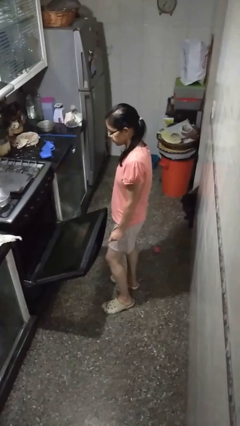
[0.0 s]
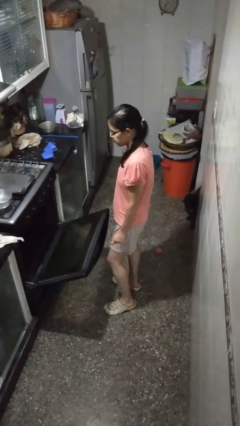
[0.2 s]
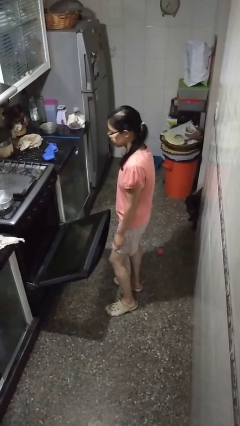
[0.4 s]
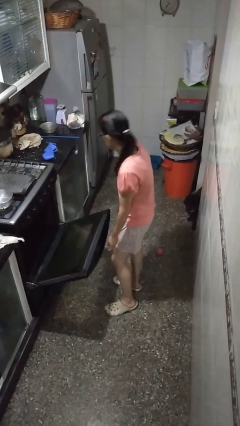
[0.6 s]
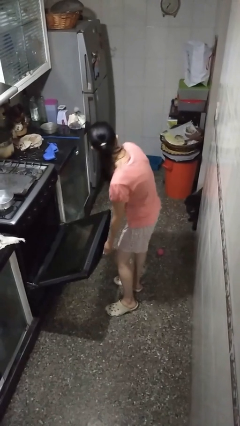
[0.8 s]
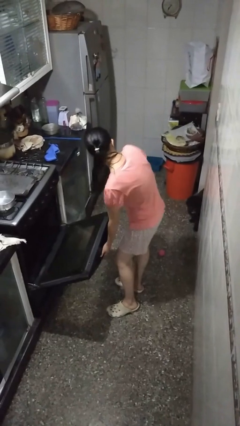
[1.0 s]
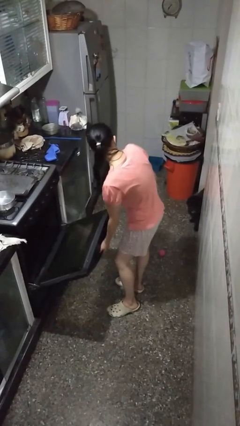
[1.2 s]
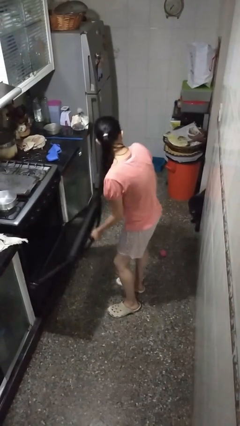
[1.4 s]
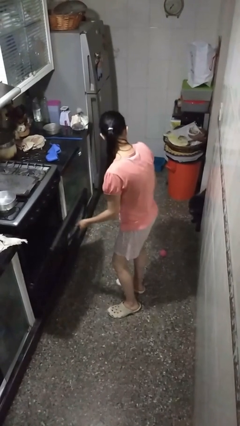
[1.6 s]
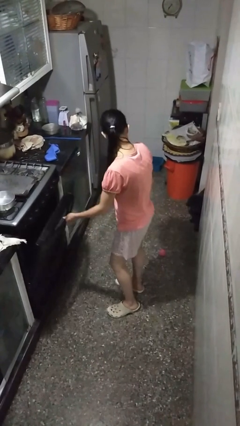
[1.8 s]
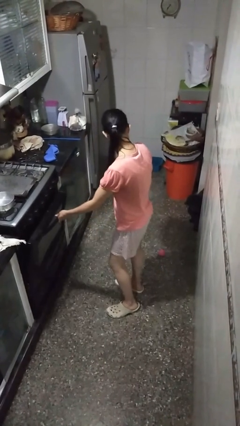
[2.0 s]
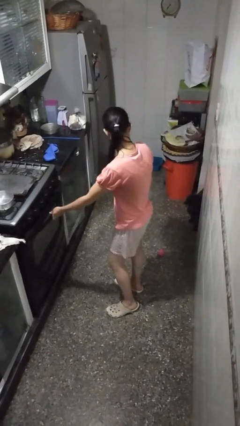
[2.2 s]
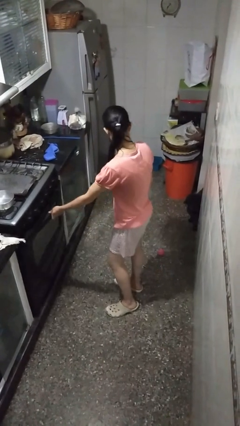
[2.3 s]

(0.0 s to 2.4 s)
person closes oven door

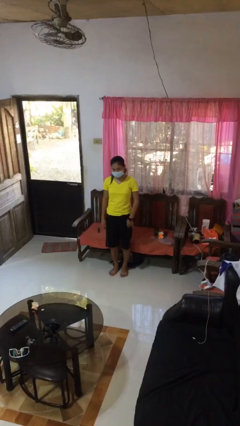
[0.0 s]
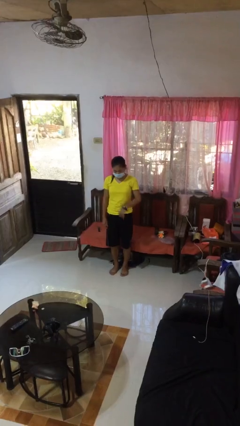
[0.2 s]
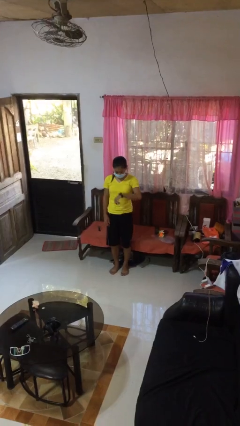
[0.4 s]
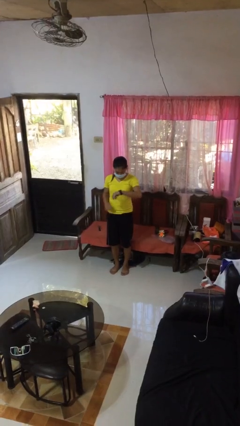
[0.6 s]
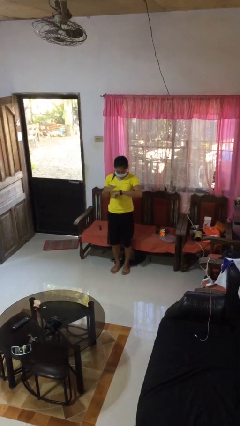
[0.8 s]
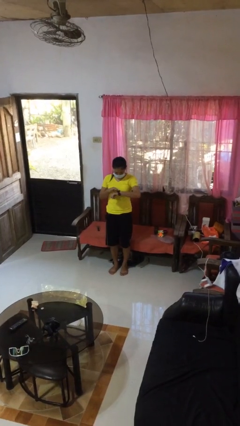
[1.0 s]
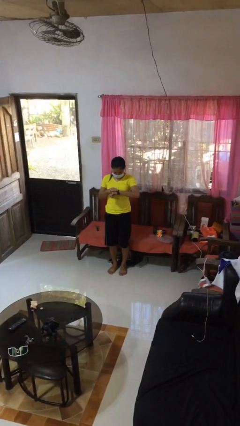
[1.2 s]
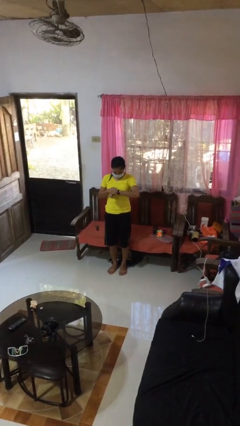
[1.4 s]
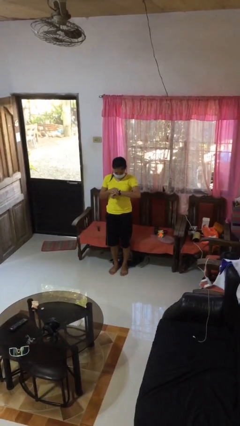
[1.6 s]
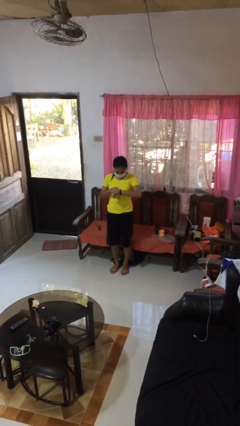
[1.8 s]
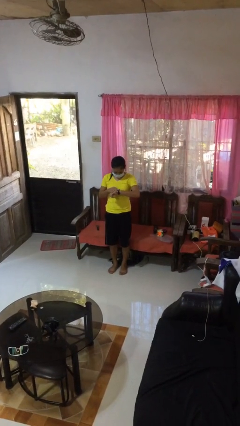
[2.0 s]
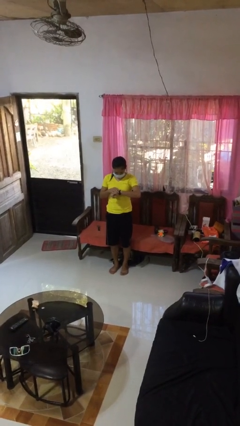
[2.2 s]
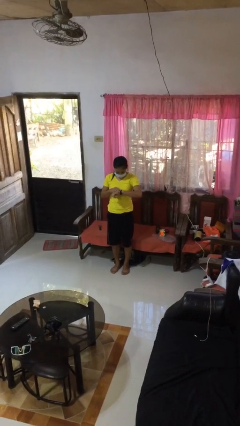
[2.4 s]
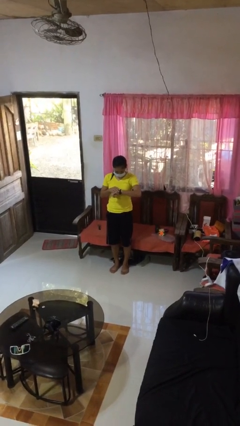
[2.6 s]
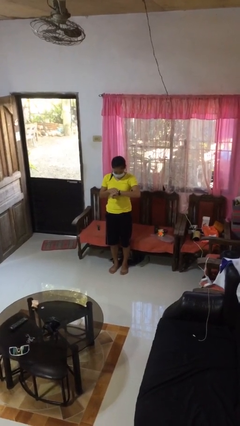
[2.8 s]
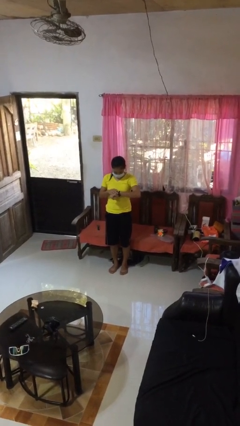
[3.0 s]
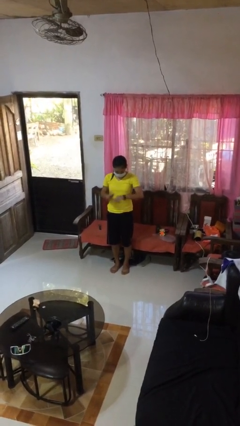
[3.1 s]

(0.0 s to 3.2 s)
person looks at wristwatch

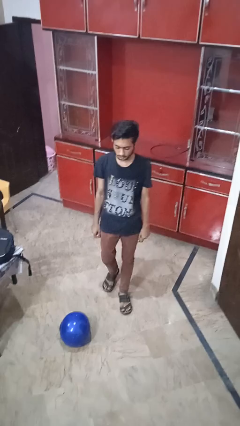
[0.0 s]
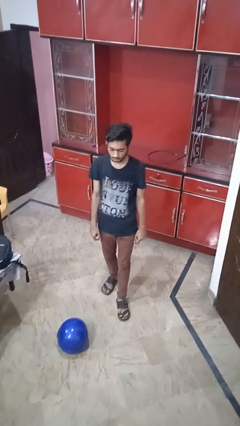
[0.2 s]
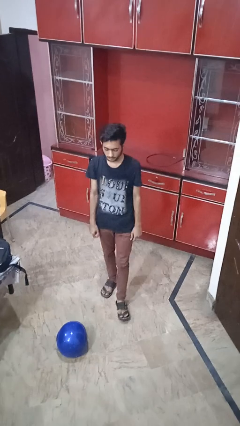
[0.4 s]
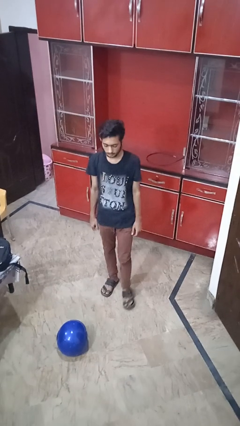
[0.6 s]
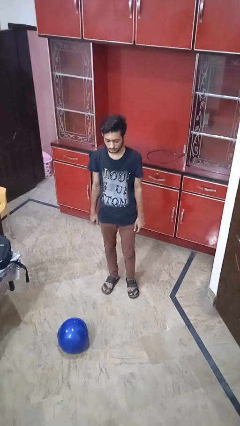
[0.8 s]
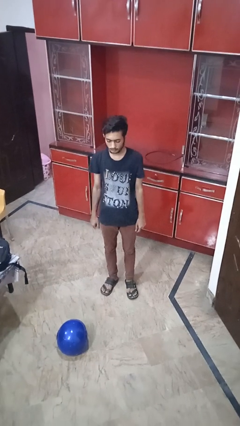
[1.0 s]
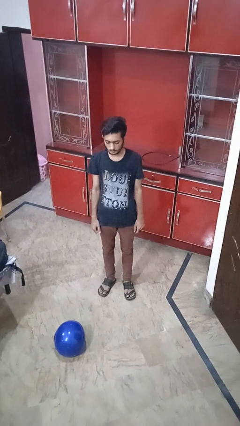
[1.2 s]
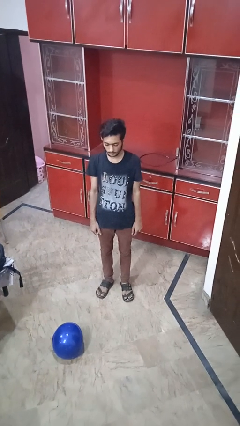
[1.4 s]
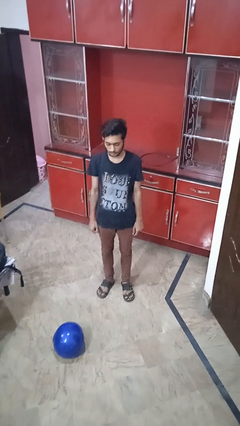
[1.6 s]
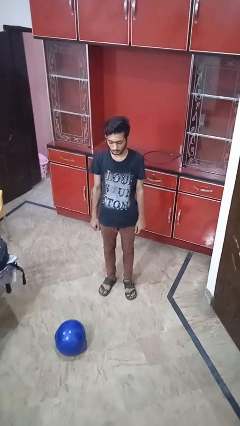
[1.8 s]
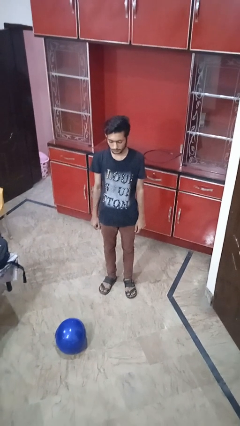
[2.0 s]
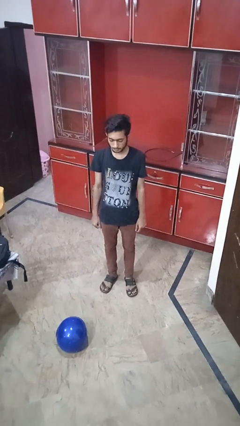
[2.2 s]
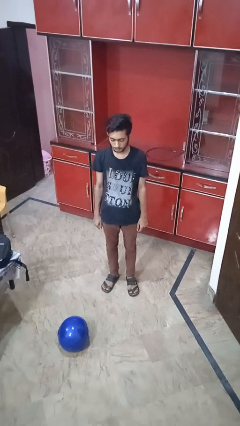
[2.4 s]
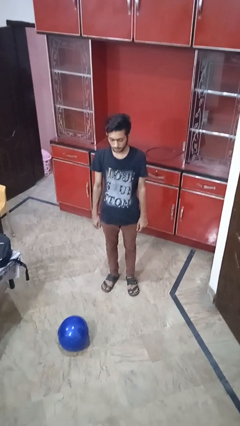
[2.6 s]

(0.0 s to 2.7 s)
person puts phone into pocket

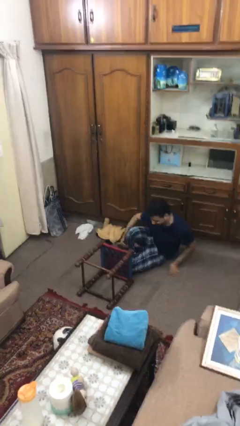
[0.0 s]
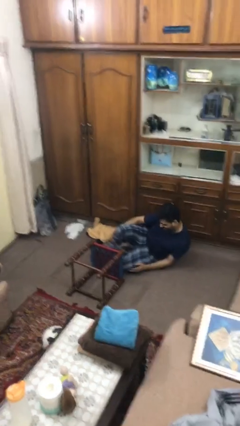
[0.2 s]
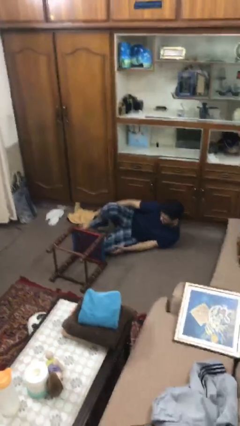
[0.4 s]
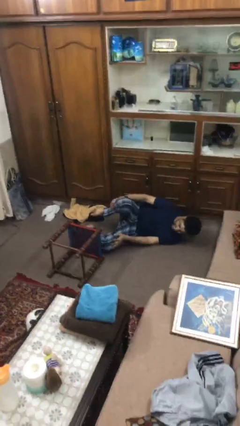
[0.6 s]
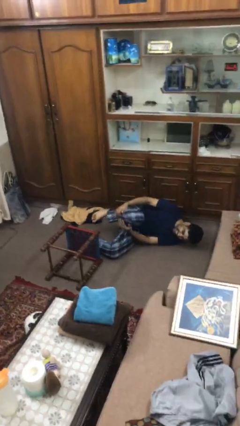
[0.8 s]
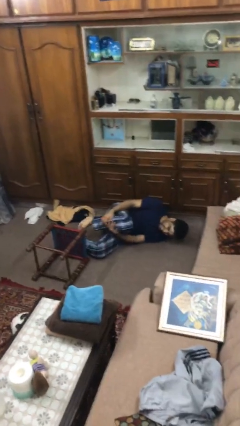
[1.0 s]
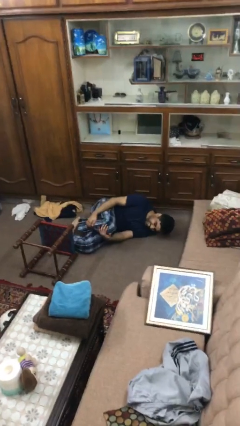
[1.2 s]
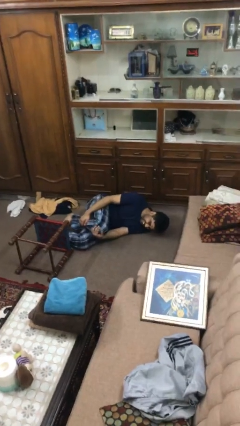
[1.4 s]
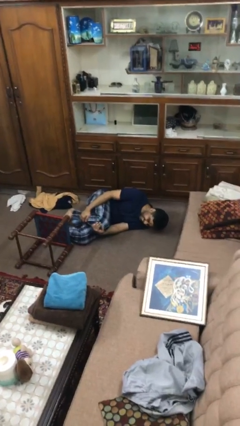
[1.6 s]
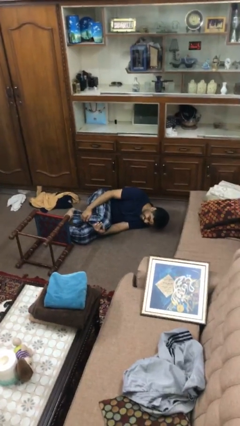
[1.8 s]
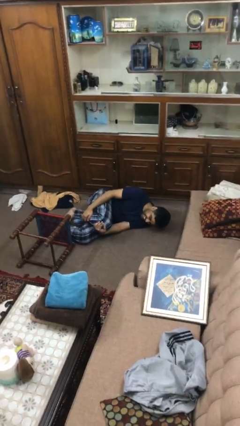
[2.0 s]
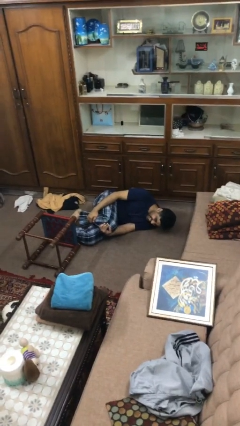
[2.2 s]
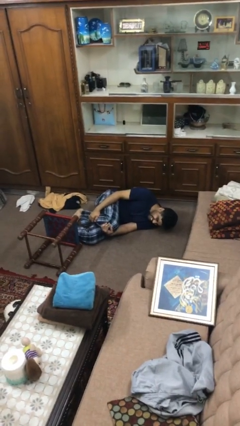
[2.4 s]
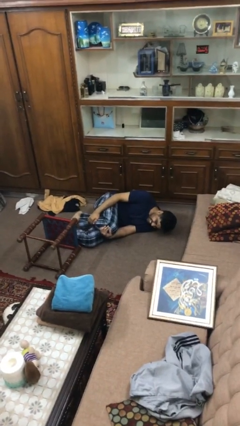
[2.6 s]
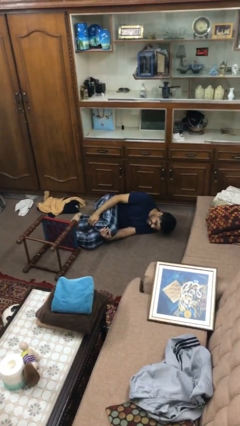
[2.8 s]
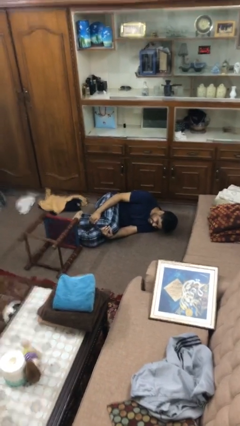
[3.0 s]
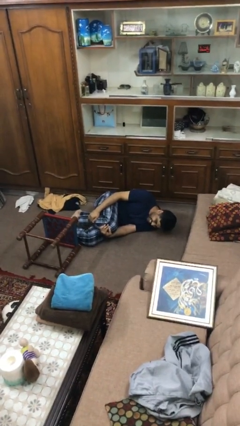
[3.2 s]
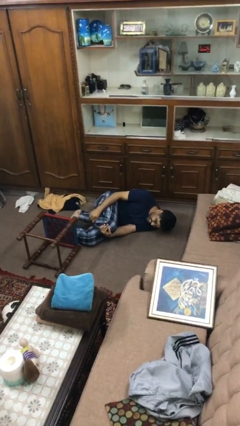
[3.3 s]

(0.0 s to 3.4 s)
person lies down on floor

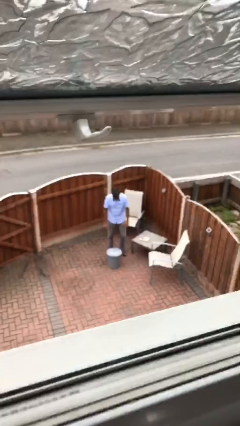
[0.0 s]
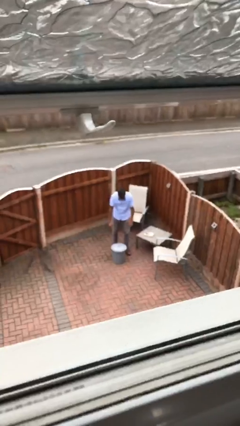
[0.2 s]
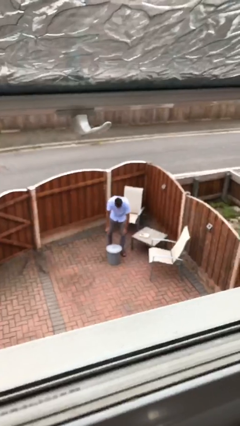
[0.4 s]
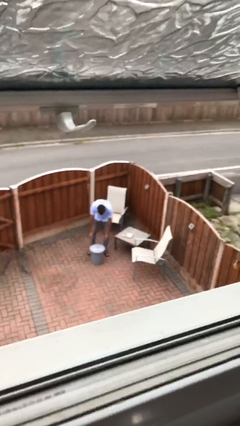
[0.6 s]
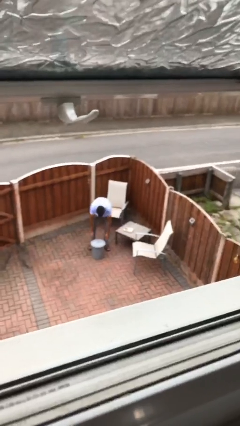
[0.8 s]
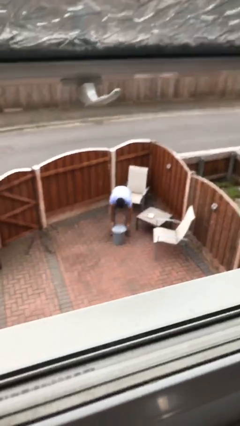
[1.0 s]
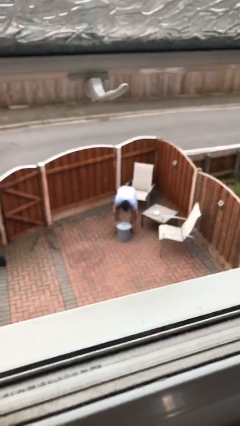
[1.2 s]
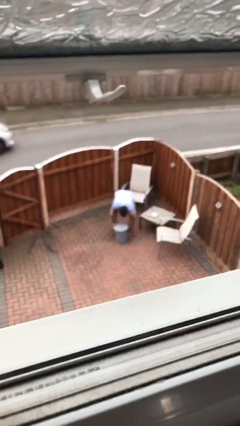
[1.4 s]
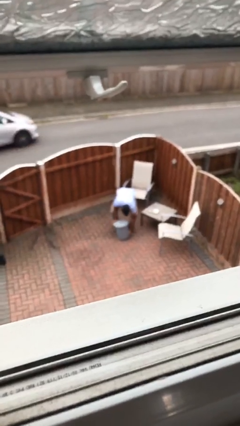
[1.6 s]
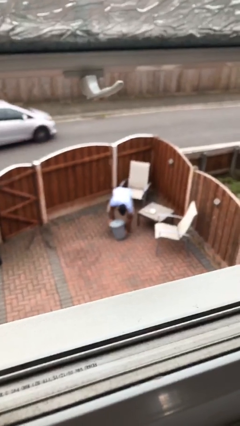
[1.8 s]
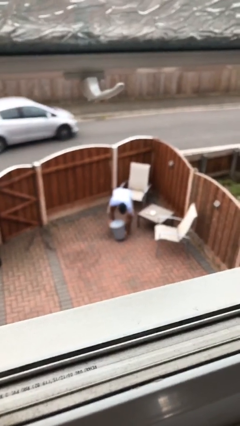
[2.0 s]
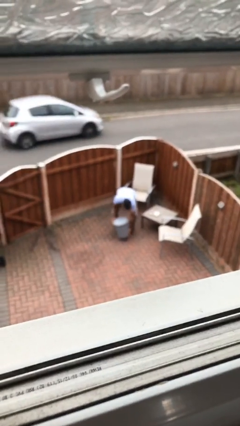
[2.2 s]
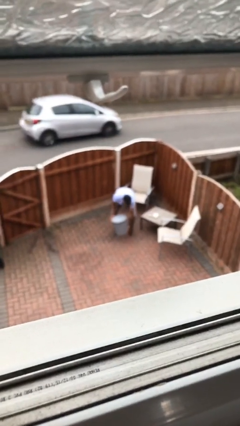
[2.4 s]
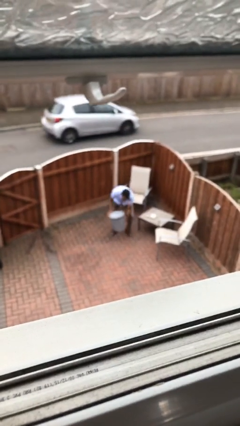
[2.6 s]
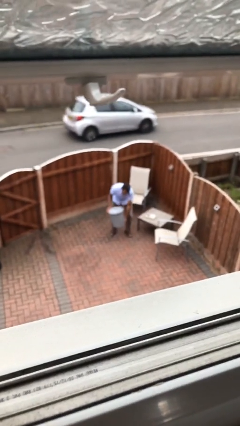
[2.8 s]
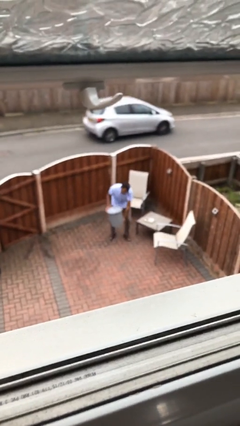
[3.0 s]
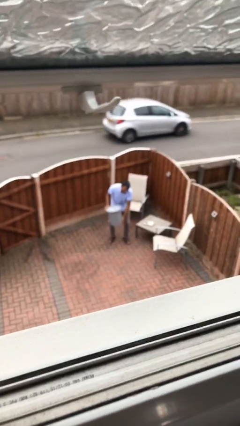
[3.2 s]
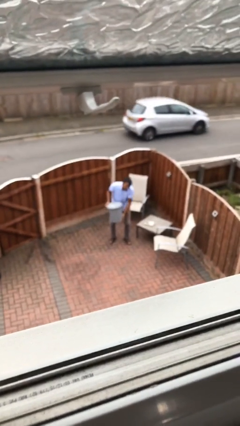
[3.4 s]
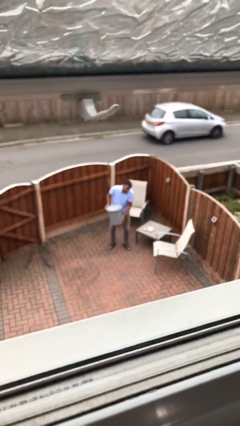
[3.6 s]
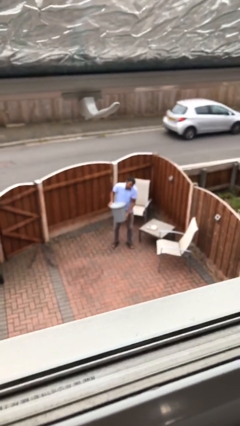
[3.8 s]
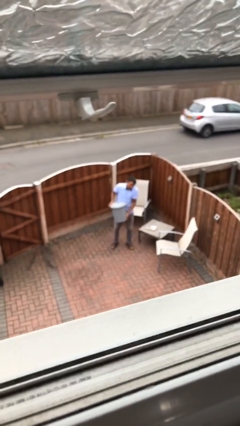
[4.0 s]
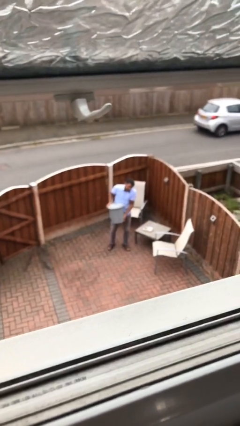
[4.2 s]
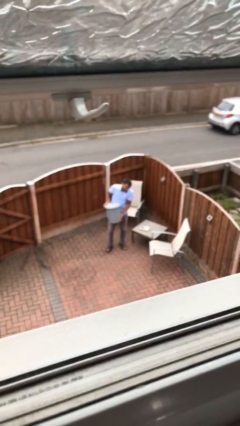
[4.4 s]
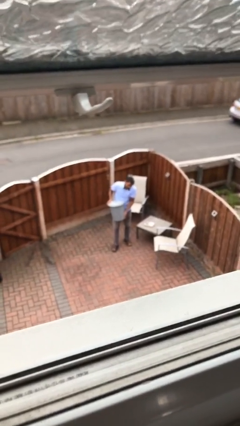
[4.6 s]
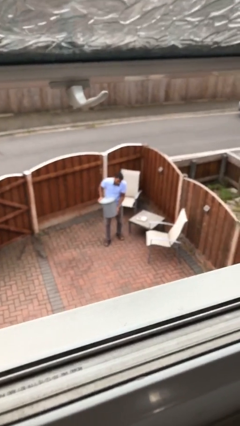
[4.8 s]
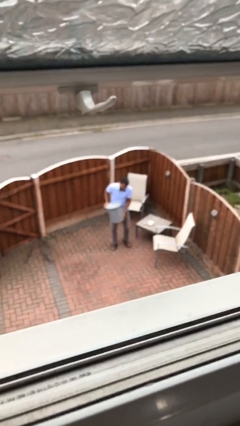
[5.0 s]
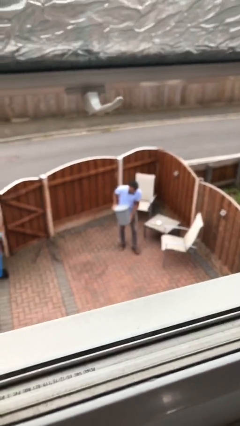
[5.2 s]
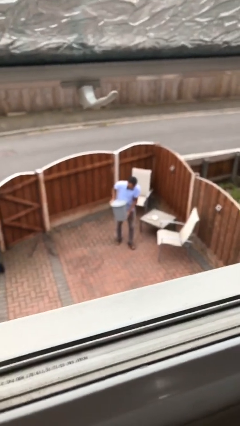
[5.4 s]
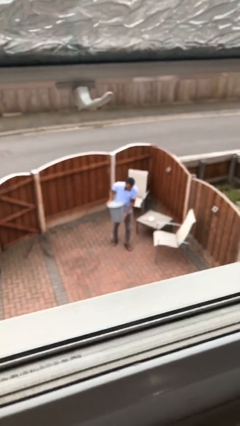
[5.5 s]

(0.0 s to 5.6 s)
person picks up object from floor

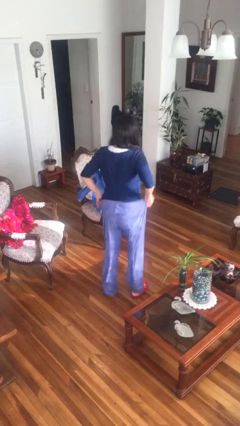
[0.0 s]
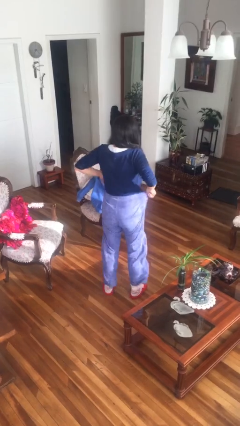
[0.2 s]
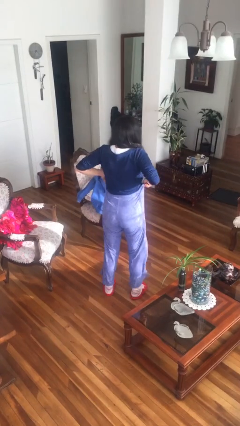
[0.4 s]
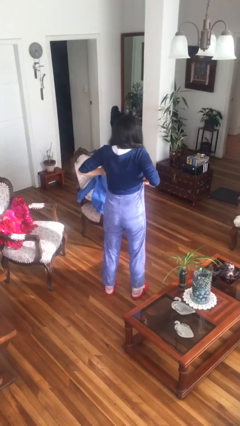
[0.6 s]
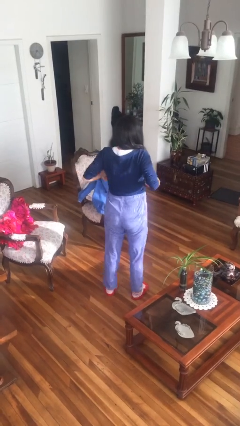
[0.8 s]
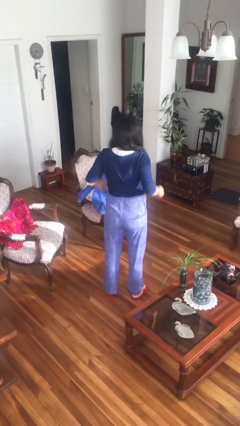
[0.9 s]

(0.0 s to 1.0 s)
person hikes up pants
